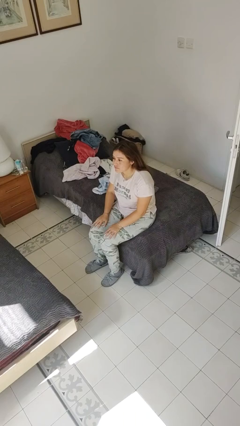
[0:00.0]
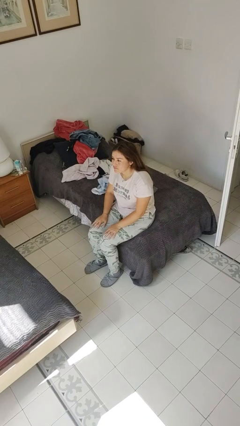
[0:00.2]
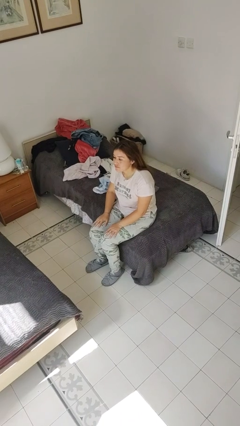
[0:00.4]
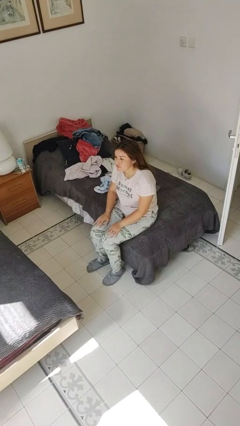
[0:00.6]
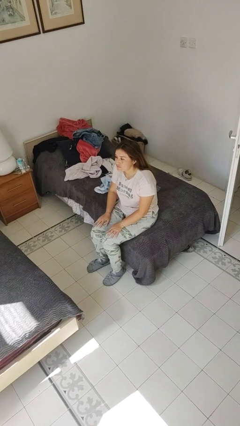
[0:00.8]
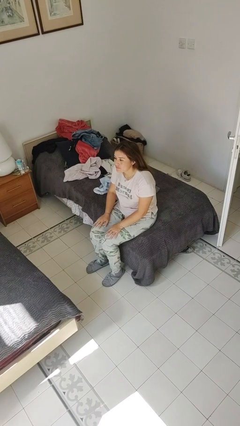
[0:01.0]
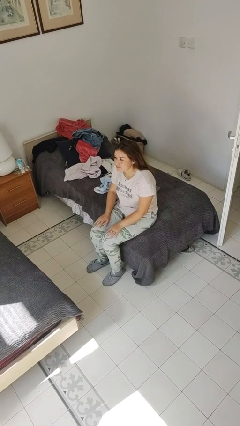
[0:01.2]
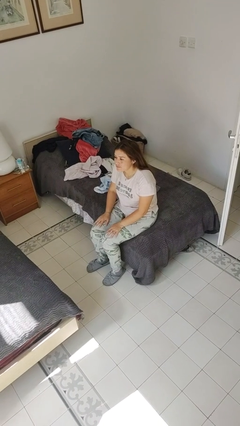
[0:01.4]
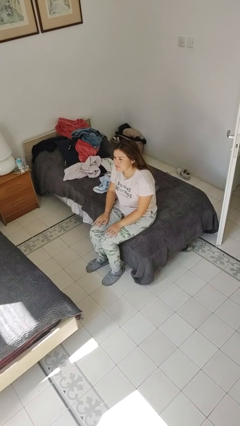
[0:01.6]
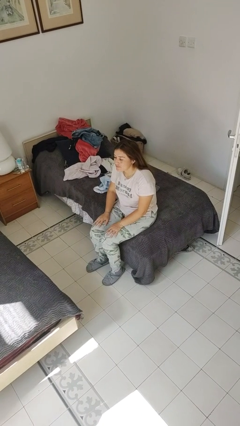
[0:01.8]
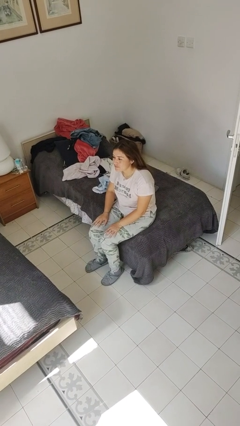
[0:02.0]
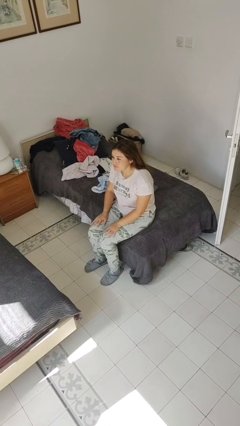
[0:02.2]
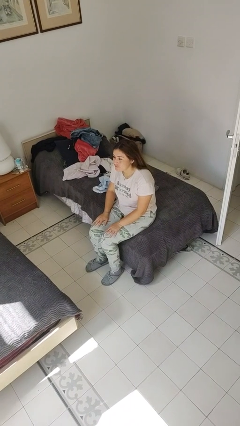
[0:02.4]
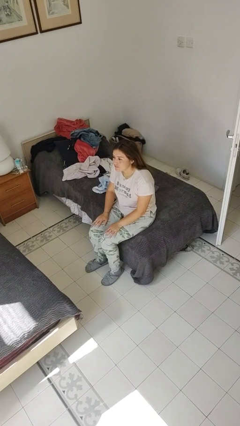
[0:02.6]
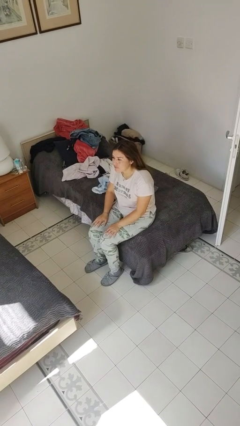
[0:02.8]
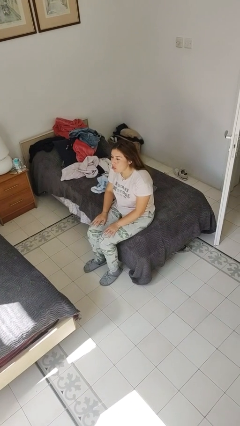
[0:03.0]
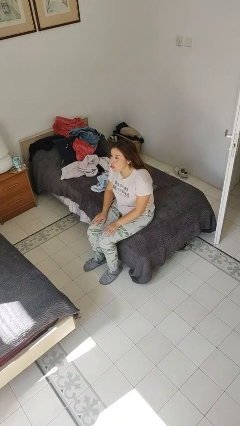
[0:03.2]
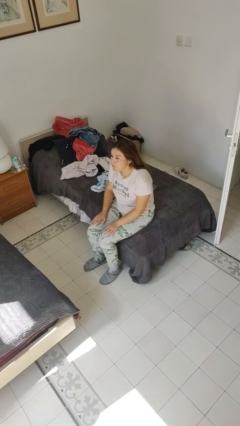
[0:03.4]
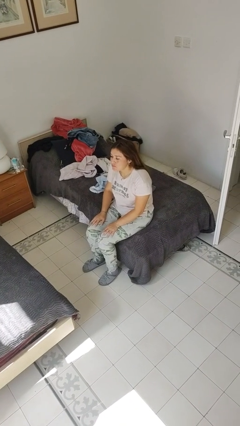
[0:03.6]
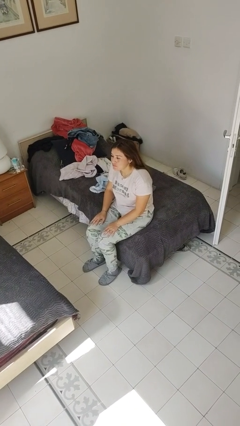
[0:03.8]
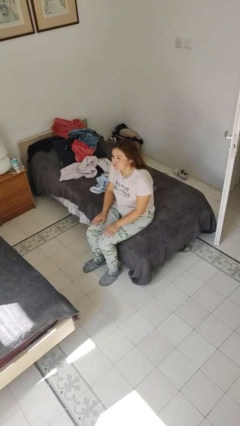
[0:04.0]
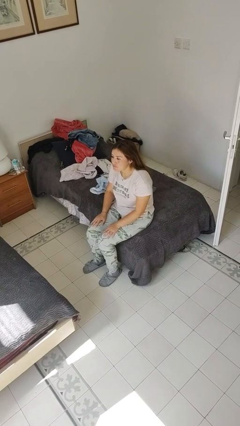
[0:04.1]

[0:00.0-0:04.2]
person sticks out tongue

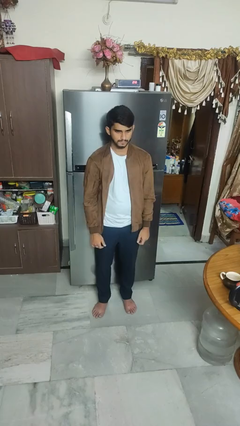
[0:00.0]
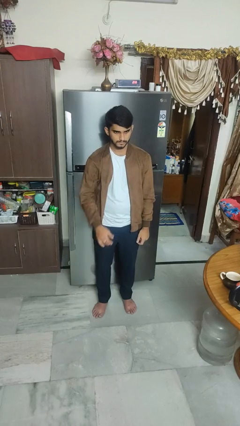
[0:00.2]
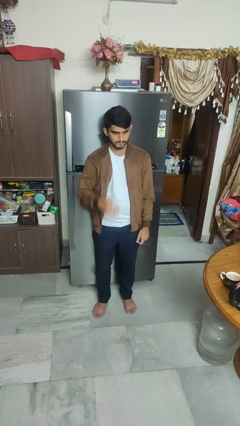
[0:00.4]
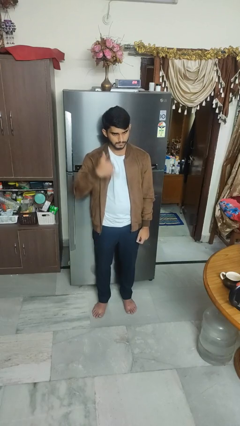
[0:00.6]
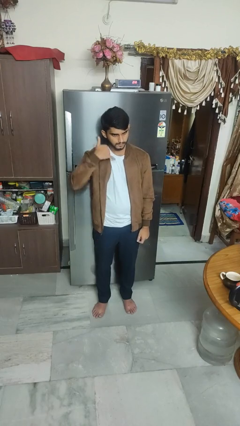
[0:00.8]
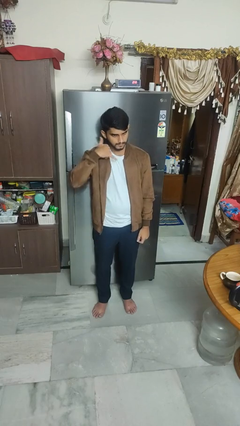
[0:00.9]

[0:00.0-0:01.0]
person gestures call me

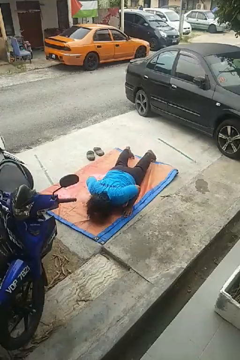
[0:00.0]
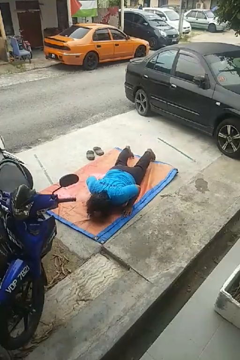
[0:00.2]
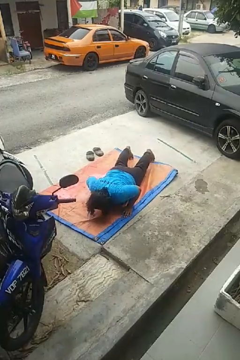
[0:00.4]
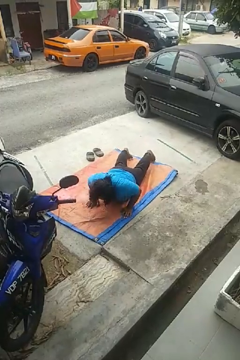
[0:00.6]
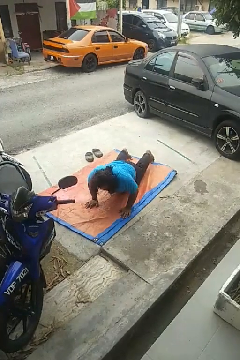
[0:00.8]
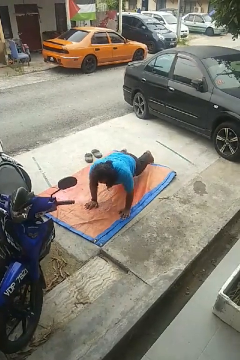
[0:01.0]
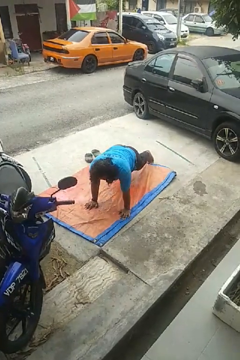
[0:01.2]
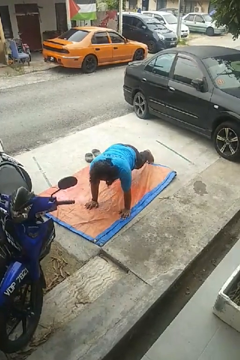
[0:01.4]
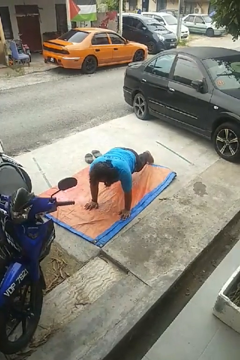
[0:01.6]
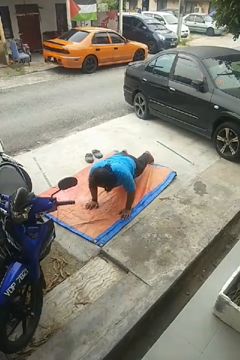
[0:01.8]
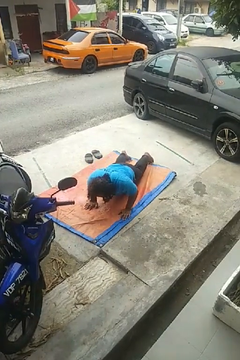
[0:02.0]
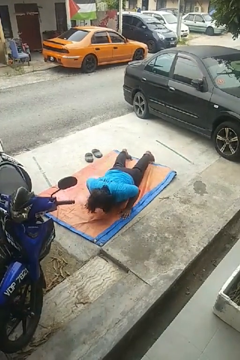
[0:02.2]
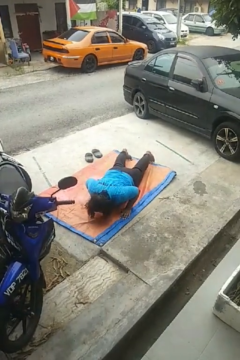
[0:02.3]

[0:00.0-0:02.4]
person exercises with pushup

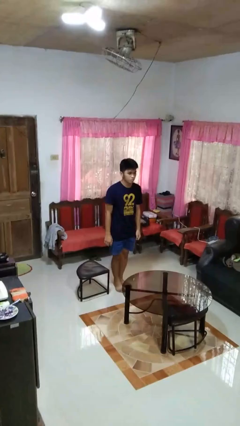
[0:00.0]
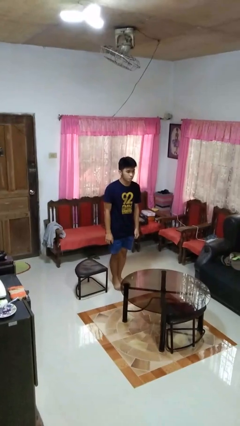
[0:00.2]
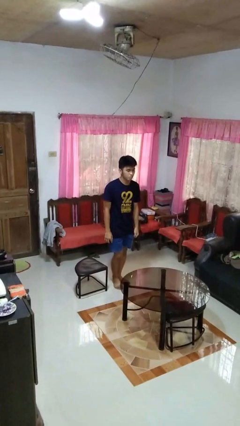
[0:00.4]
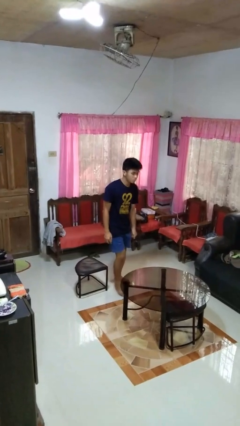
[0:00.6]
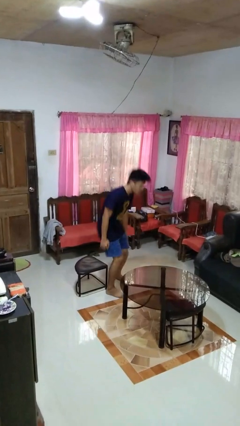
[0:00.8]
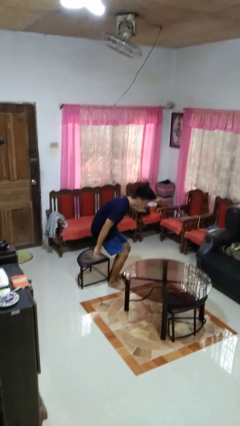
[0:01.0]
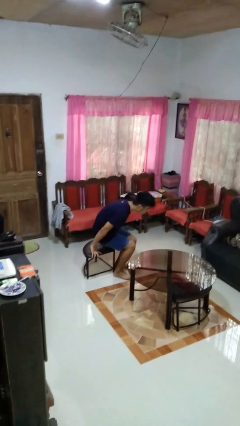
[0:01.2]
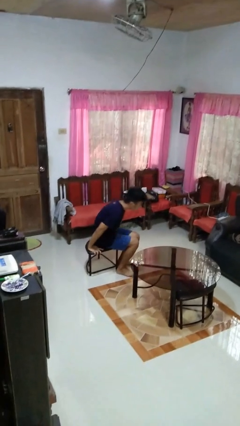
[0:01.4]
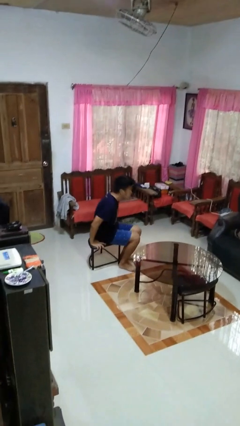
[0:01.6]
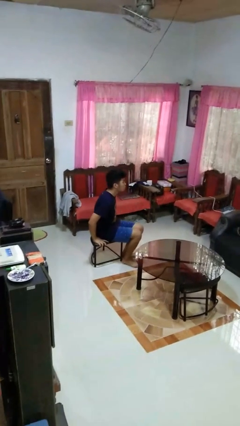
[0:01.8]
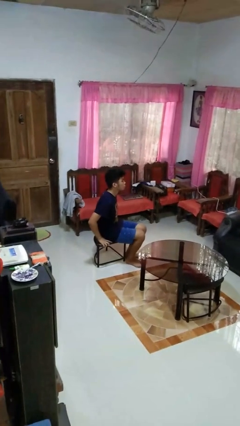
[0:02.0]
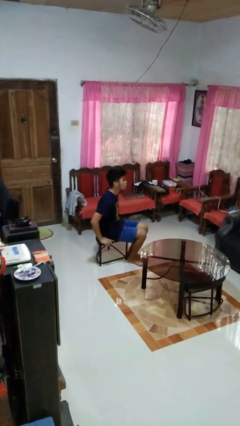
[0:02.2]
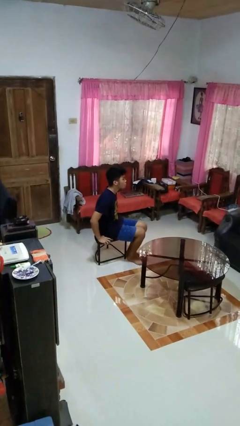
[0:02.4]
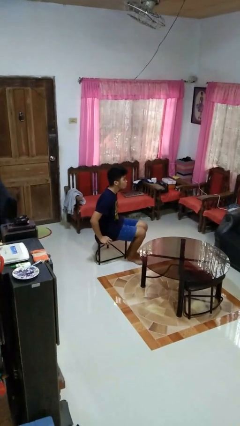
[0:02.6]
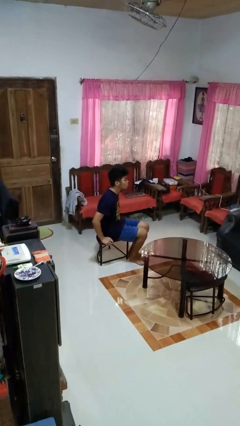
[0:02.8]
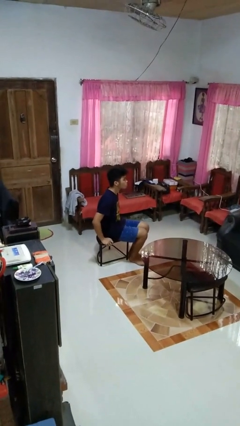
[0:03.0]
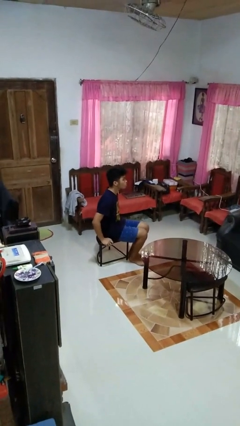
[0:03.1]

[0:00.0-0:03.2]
person sits down

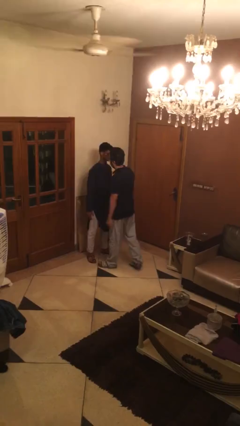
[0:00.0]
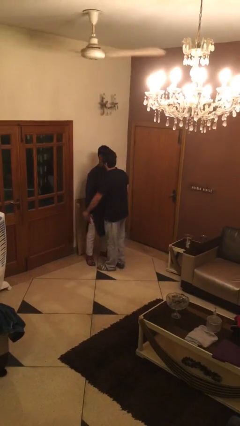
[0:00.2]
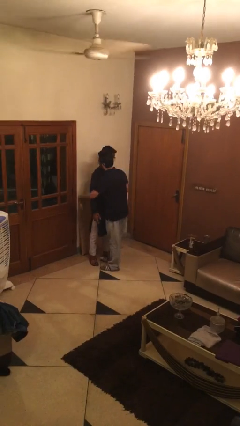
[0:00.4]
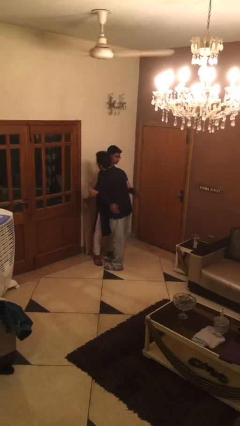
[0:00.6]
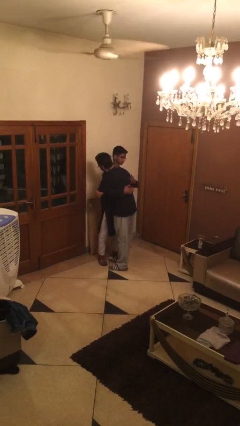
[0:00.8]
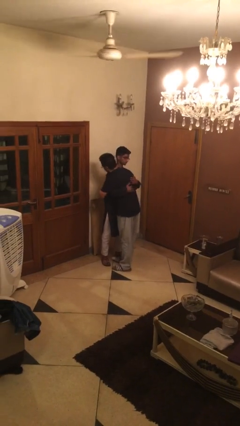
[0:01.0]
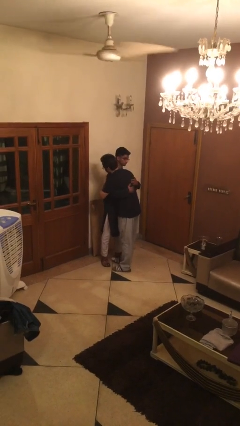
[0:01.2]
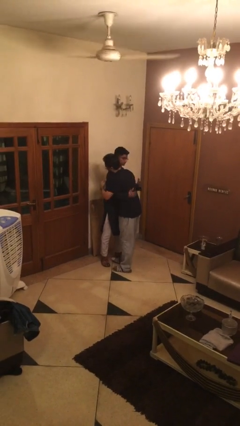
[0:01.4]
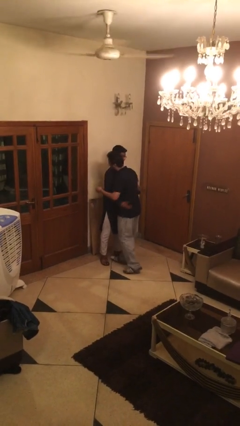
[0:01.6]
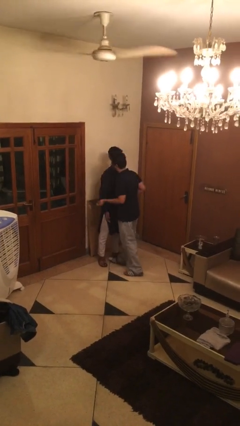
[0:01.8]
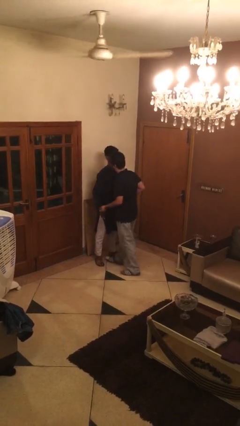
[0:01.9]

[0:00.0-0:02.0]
person embraces person

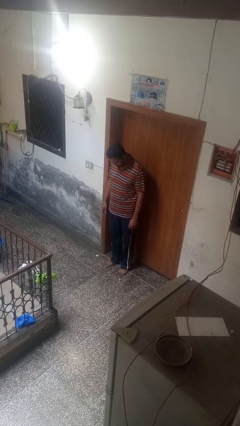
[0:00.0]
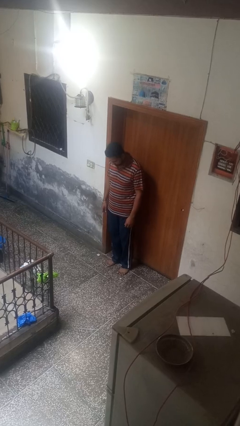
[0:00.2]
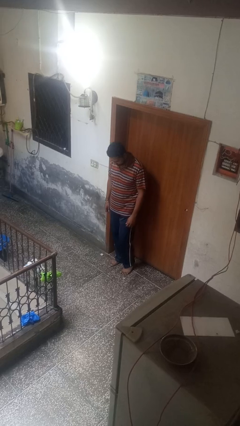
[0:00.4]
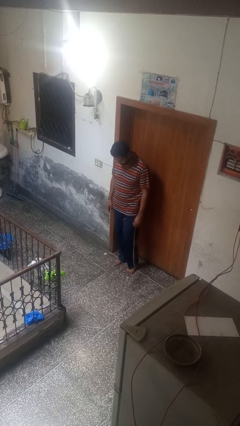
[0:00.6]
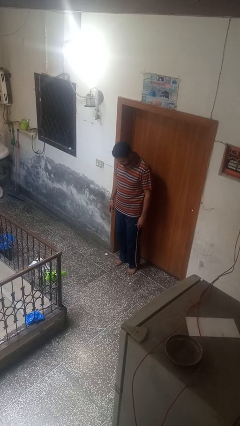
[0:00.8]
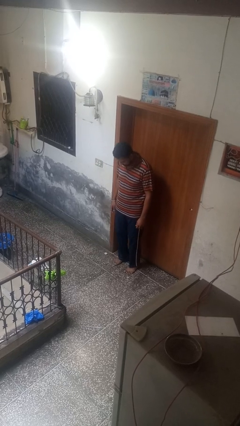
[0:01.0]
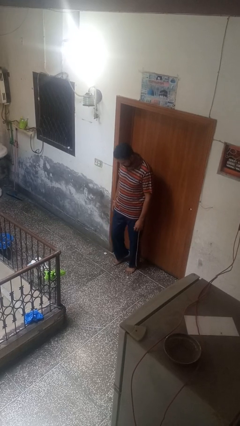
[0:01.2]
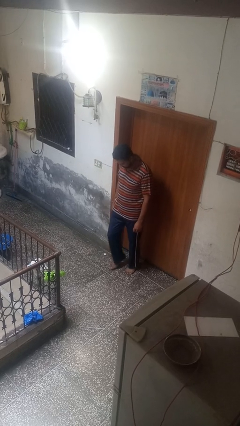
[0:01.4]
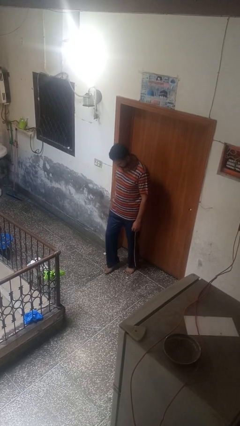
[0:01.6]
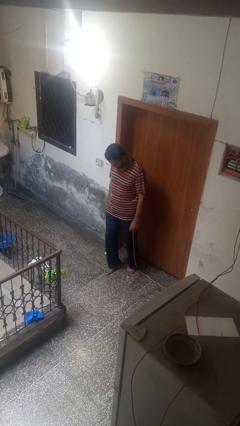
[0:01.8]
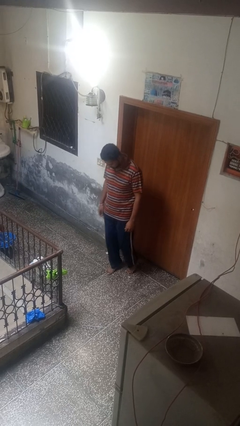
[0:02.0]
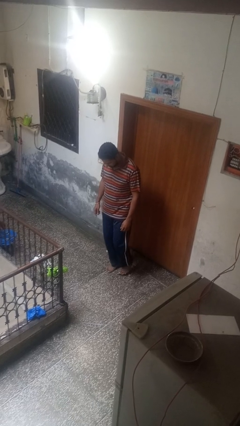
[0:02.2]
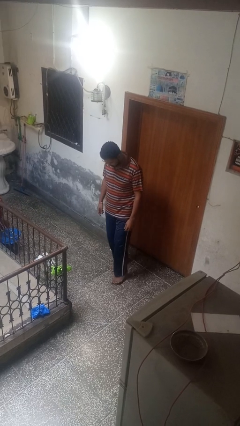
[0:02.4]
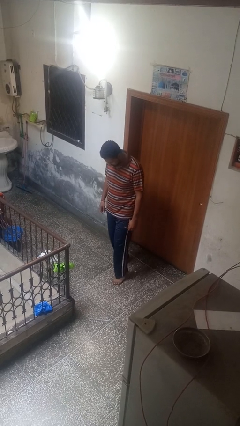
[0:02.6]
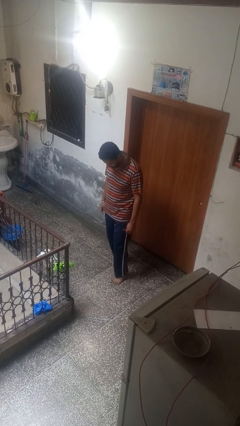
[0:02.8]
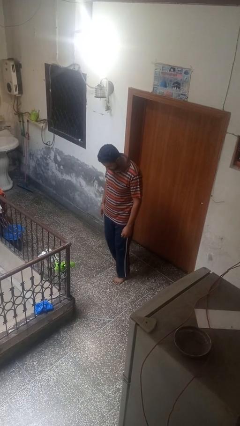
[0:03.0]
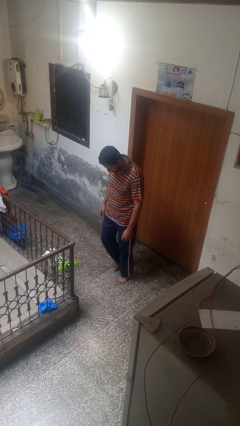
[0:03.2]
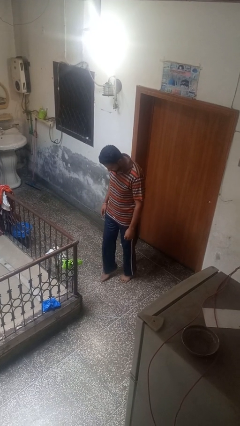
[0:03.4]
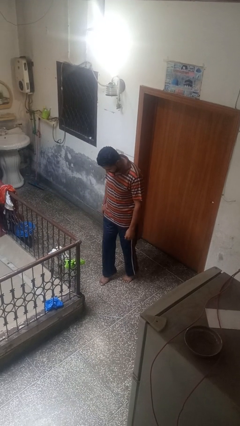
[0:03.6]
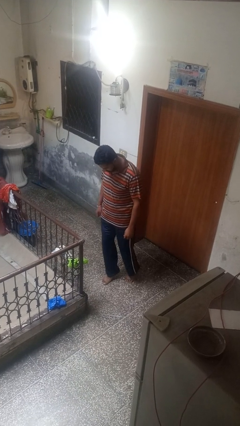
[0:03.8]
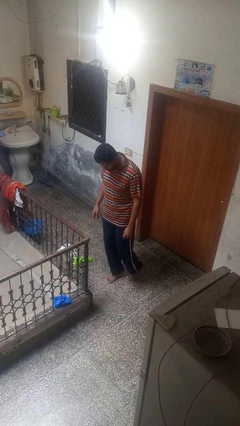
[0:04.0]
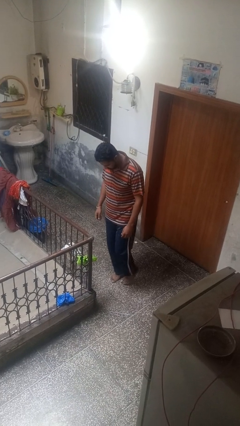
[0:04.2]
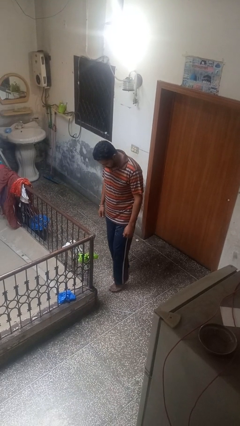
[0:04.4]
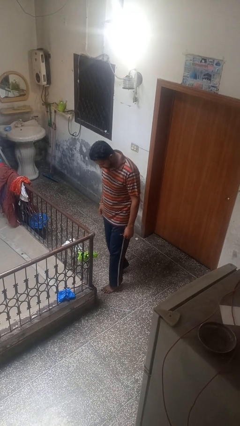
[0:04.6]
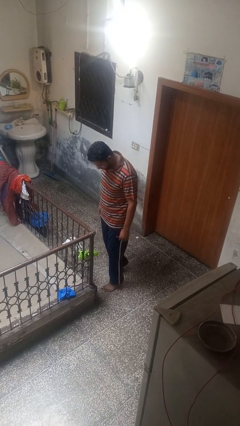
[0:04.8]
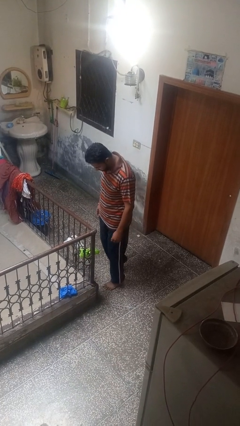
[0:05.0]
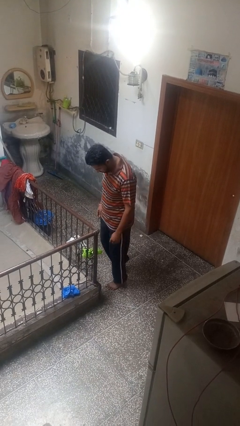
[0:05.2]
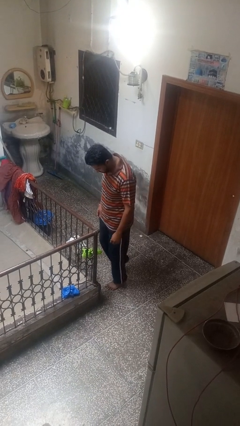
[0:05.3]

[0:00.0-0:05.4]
person walks tiptoe
